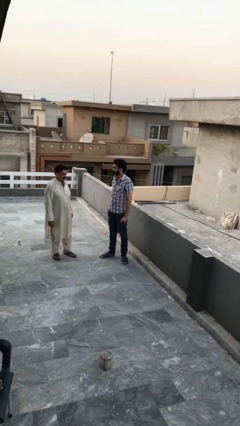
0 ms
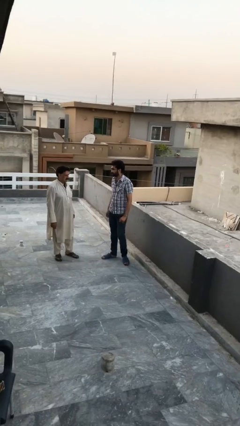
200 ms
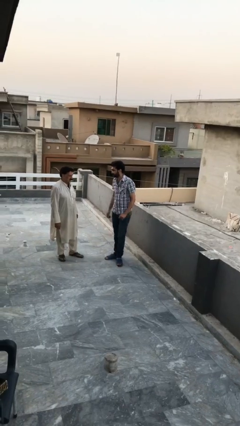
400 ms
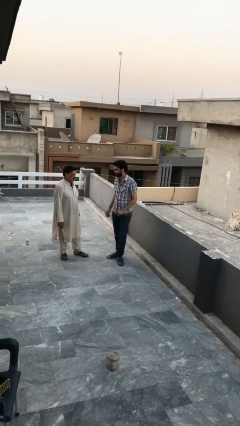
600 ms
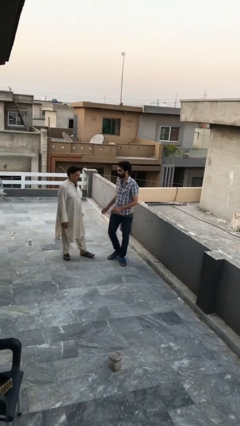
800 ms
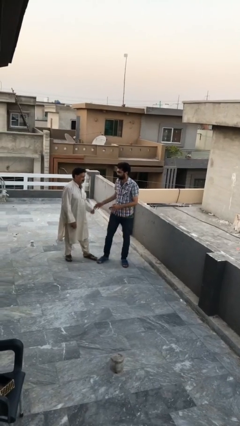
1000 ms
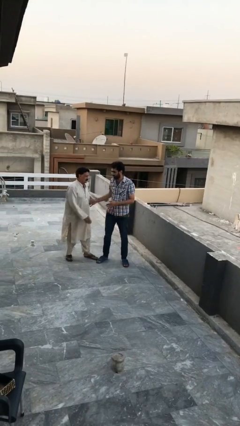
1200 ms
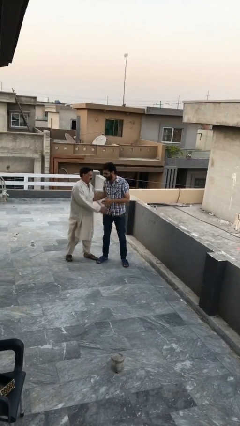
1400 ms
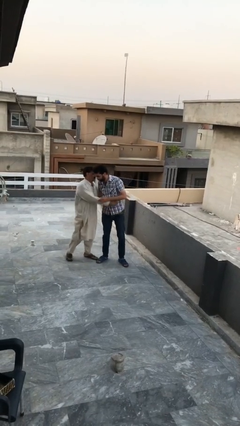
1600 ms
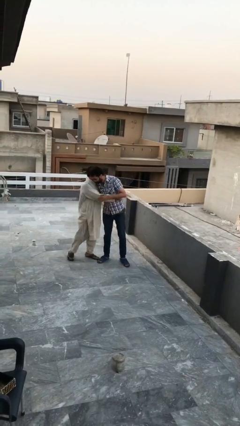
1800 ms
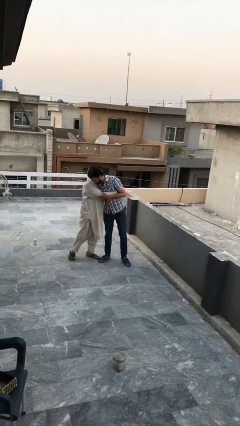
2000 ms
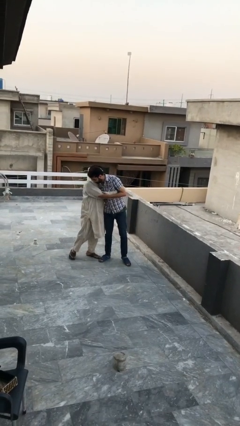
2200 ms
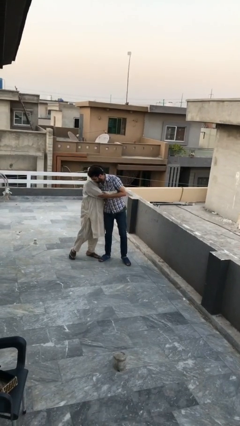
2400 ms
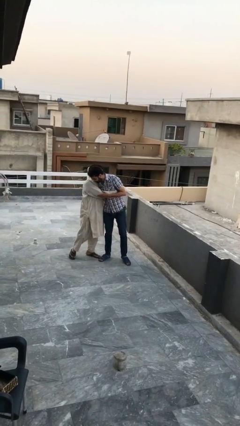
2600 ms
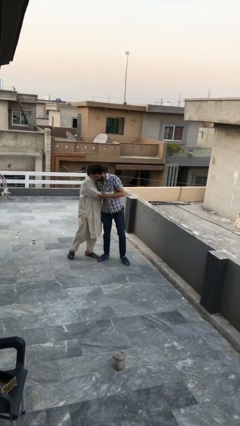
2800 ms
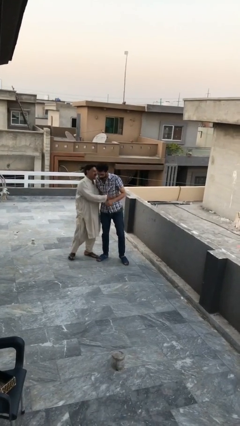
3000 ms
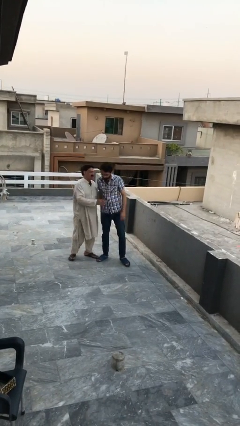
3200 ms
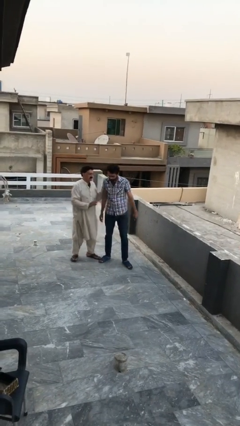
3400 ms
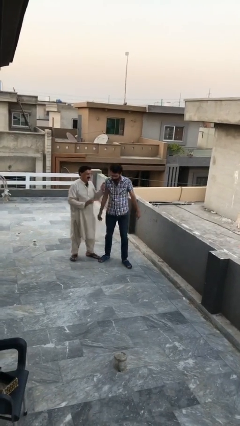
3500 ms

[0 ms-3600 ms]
person embraces person

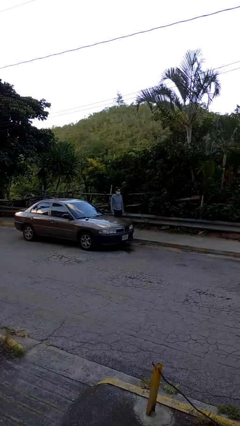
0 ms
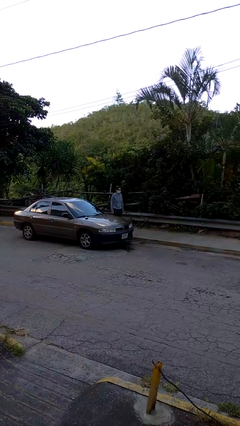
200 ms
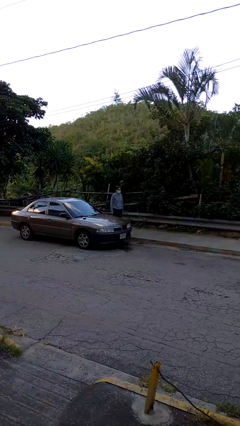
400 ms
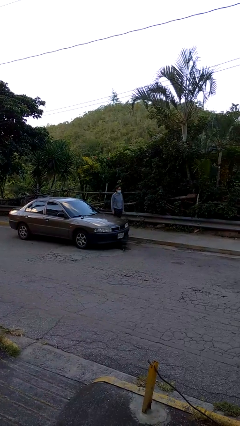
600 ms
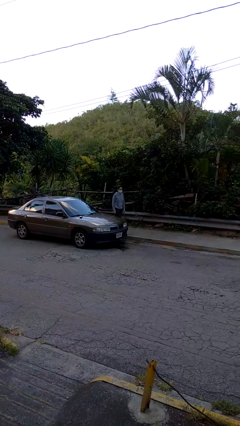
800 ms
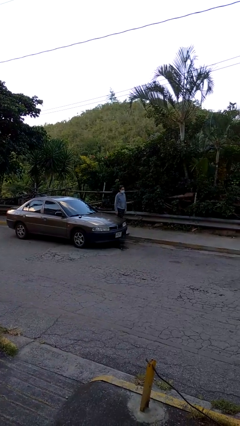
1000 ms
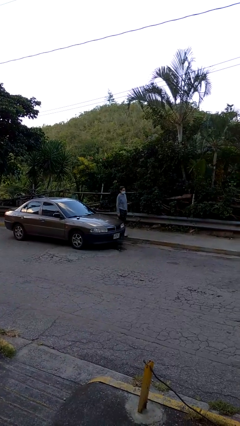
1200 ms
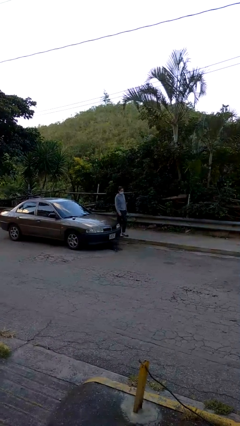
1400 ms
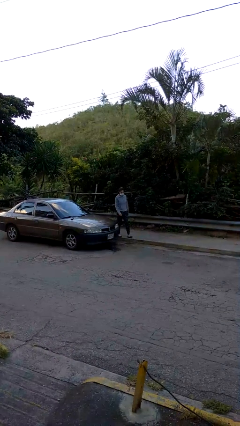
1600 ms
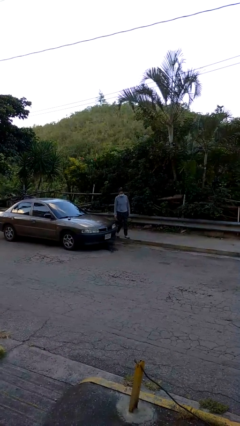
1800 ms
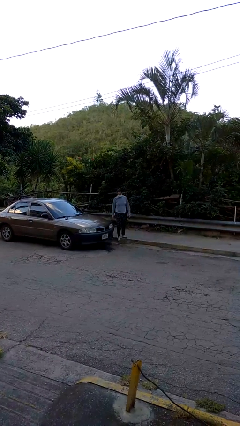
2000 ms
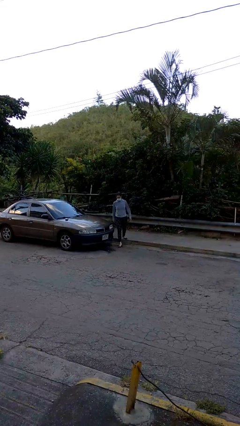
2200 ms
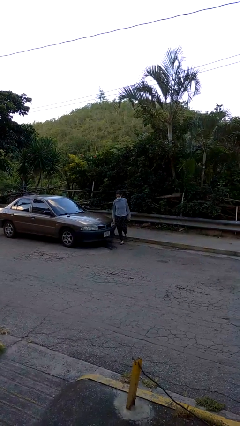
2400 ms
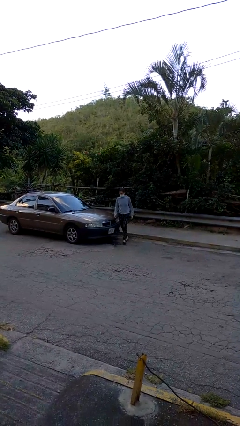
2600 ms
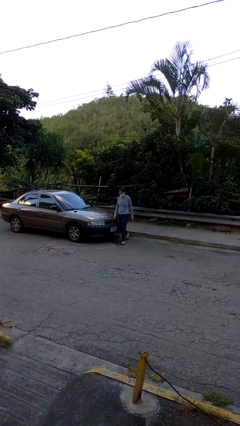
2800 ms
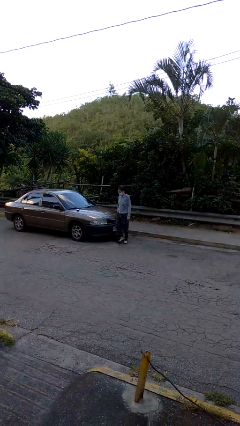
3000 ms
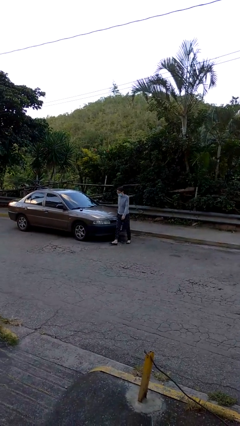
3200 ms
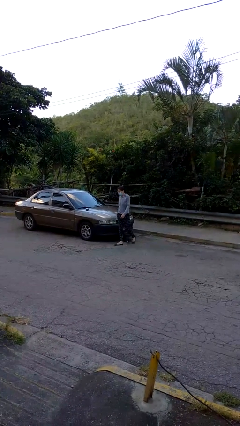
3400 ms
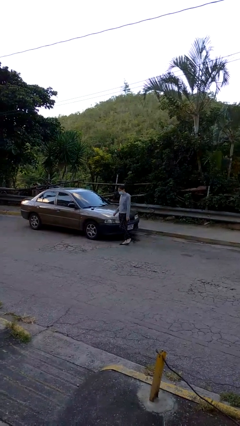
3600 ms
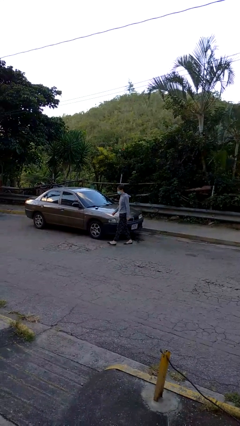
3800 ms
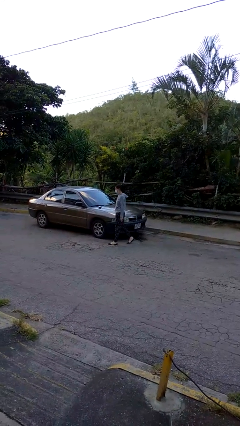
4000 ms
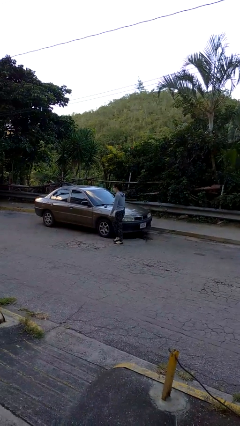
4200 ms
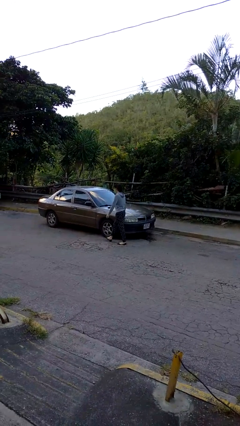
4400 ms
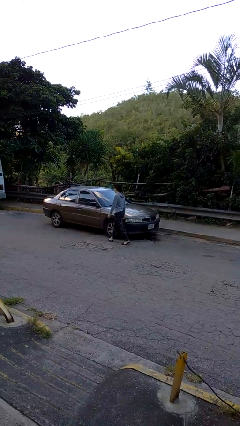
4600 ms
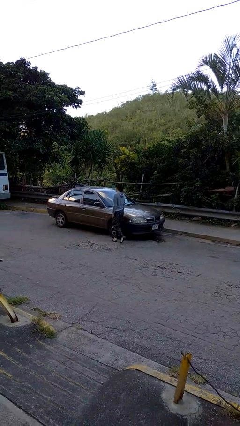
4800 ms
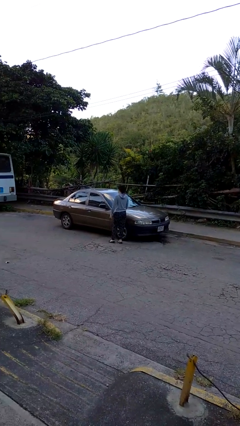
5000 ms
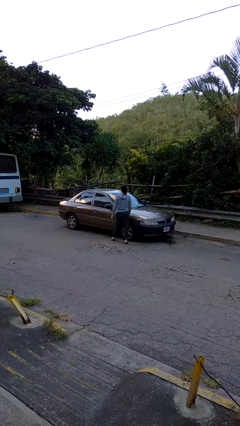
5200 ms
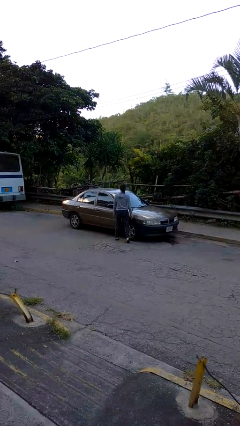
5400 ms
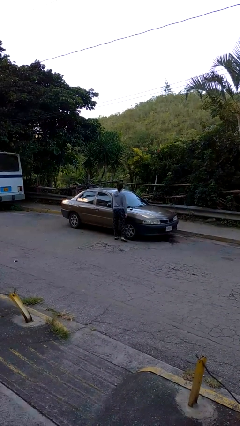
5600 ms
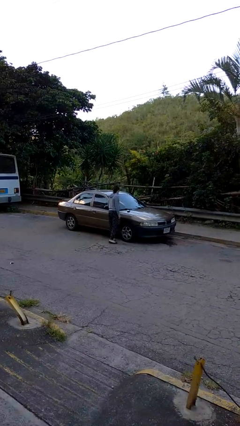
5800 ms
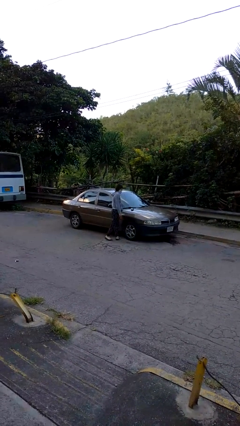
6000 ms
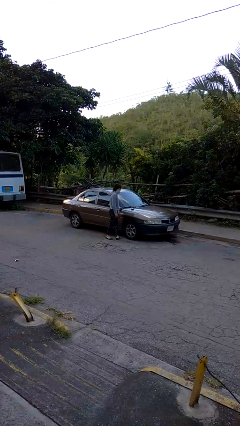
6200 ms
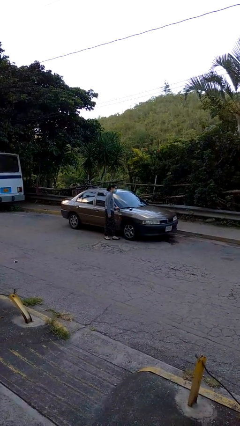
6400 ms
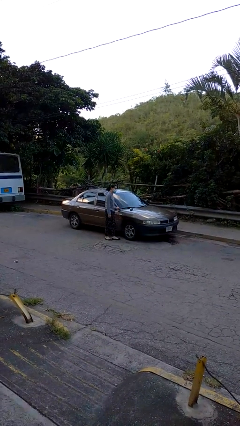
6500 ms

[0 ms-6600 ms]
person walks around car

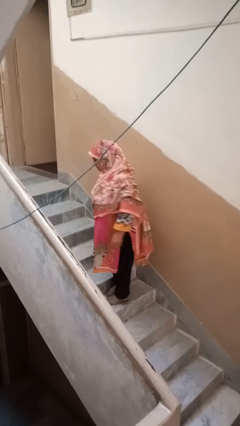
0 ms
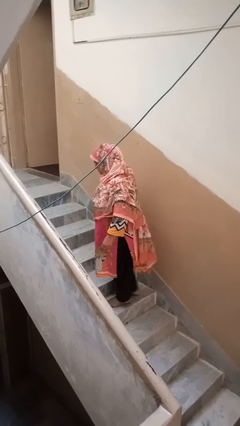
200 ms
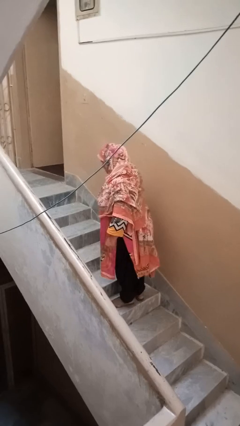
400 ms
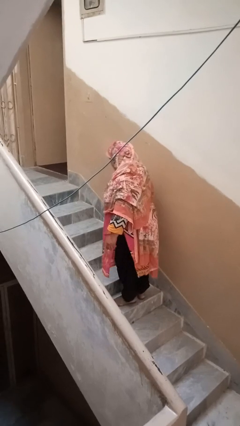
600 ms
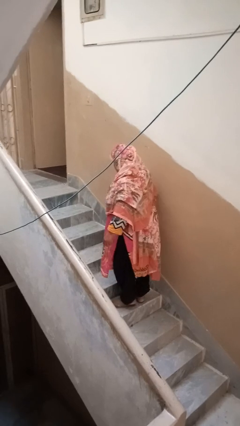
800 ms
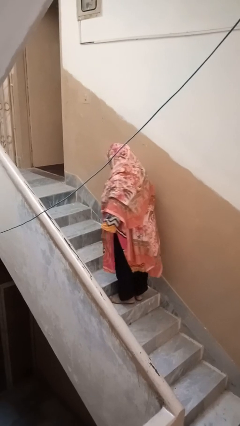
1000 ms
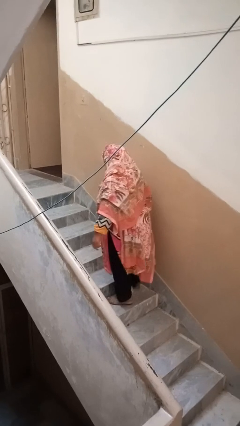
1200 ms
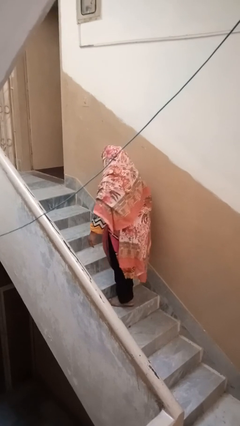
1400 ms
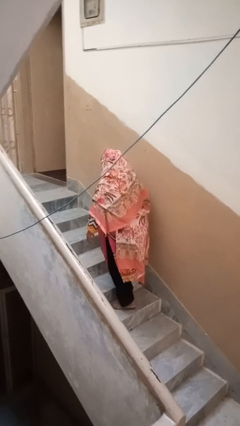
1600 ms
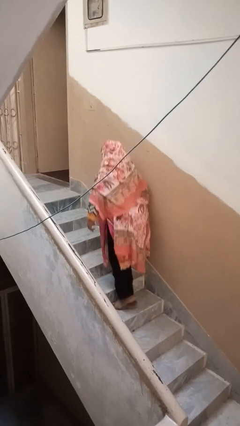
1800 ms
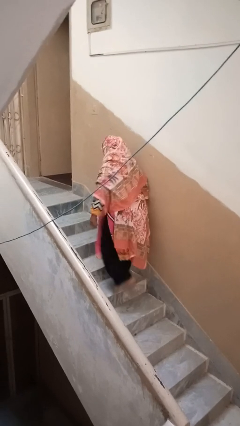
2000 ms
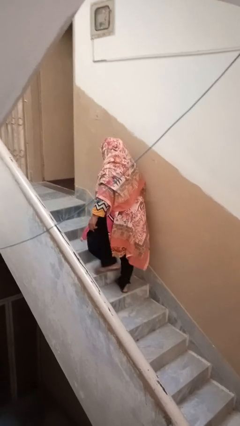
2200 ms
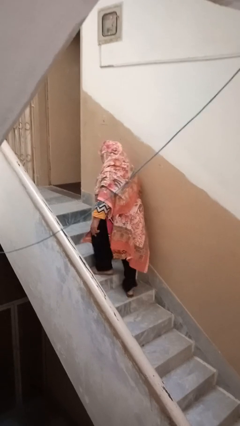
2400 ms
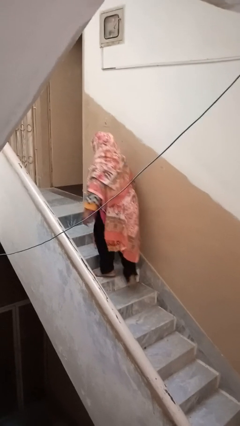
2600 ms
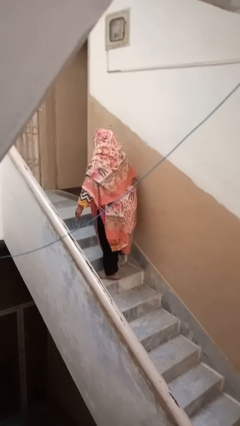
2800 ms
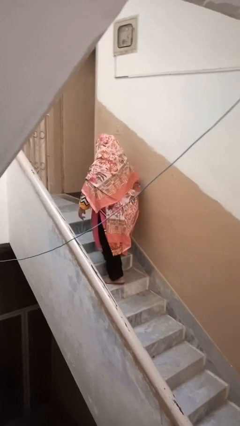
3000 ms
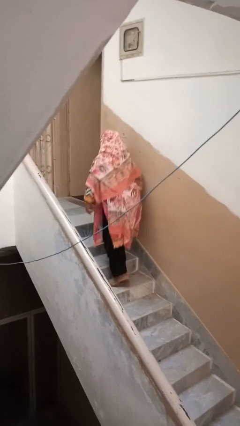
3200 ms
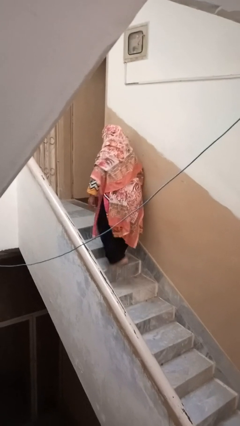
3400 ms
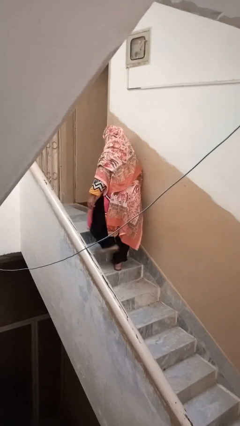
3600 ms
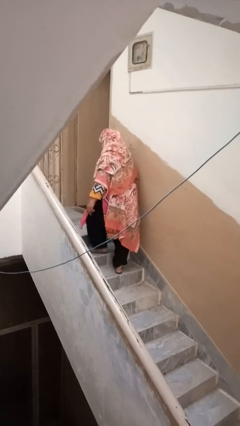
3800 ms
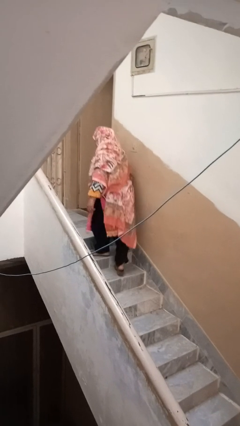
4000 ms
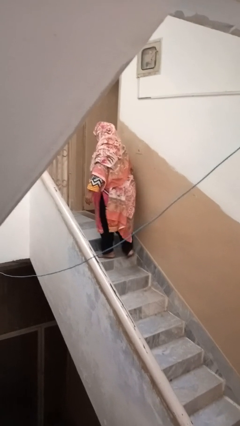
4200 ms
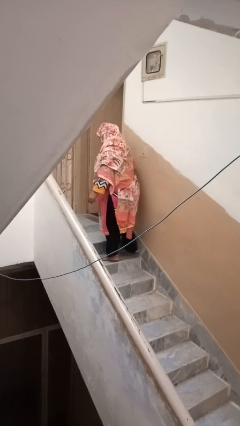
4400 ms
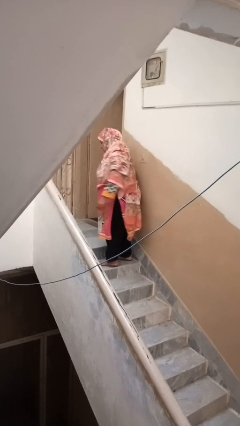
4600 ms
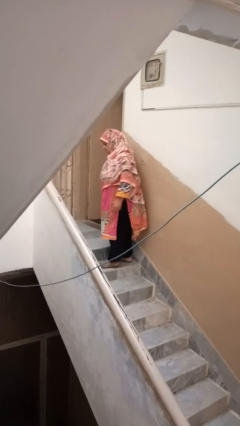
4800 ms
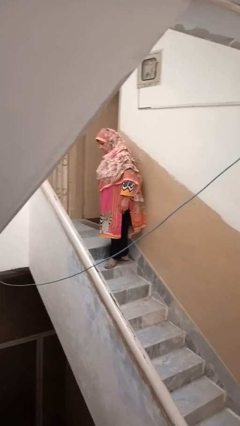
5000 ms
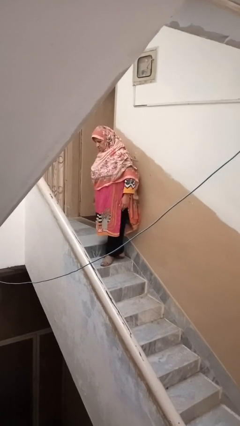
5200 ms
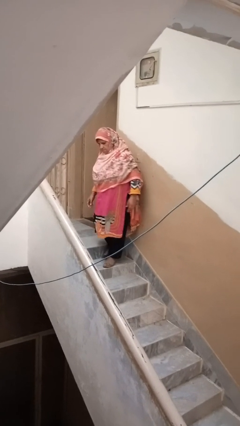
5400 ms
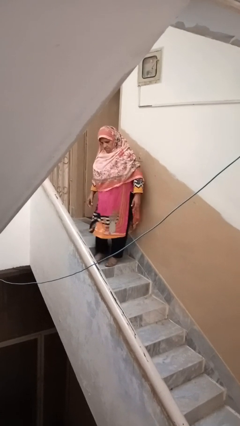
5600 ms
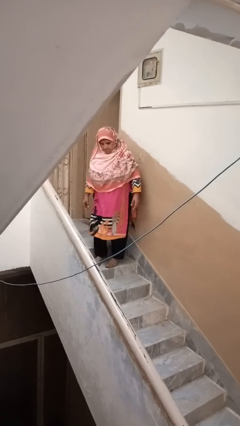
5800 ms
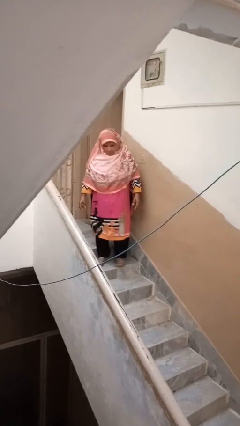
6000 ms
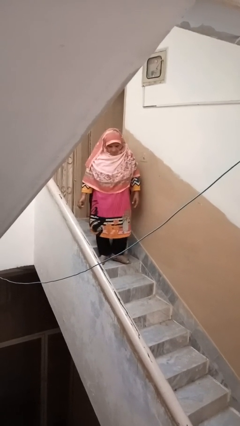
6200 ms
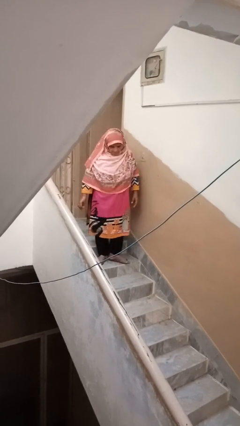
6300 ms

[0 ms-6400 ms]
person climbs up stairs

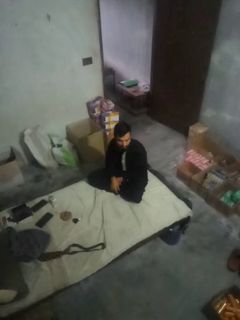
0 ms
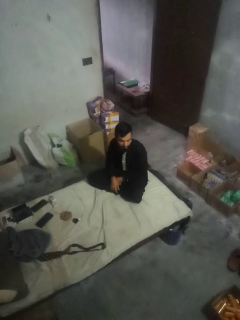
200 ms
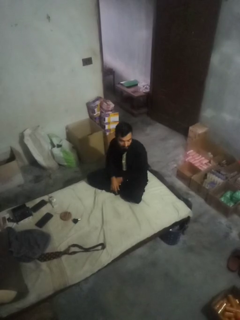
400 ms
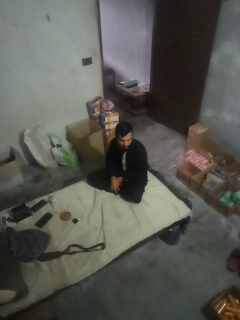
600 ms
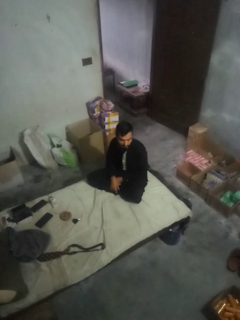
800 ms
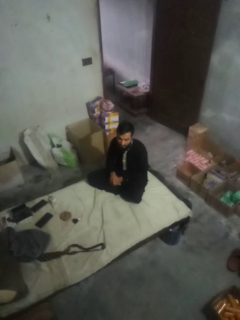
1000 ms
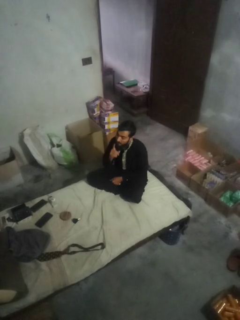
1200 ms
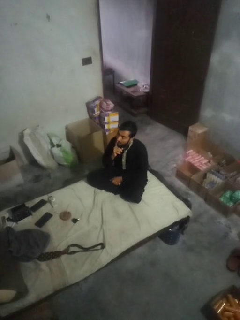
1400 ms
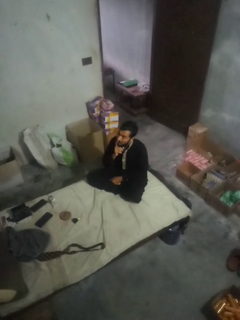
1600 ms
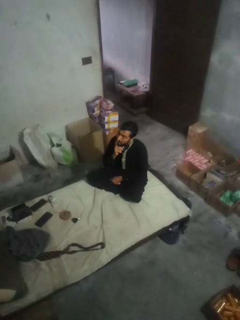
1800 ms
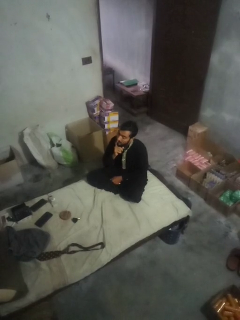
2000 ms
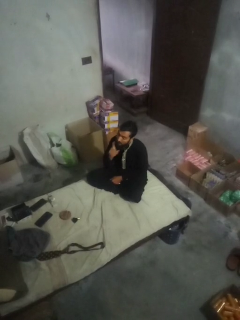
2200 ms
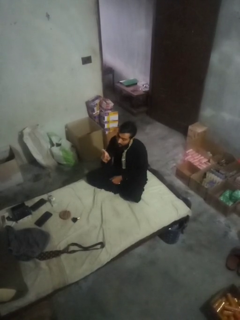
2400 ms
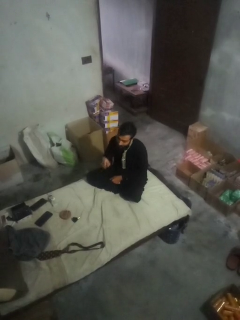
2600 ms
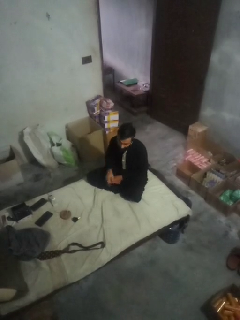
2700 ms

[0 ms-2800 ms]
person gestures be quiet
